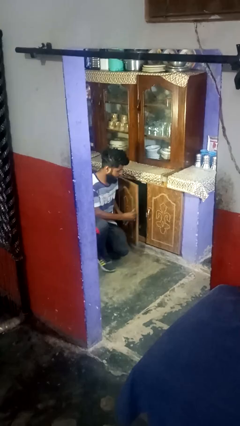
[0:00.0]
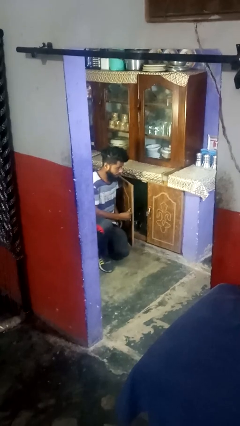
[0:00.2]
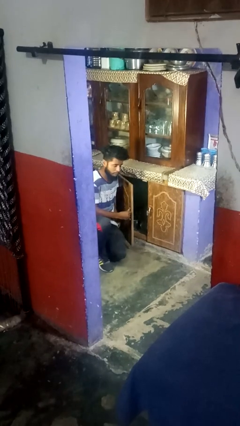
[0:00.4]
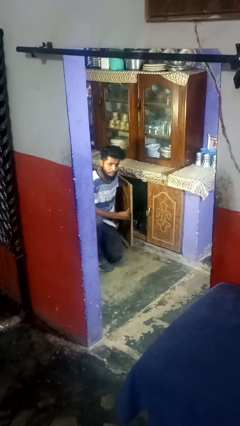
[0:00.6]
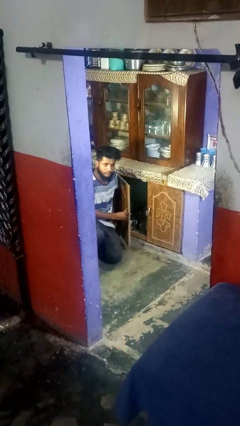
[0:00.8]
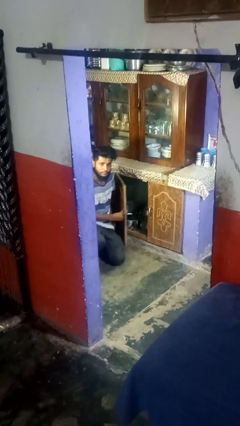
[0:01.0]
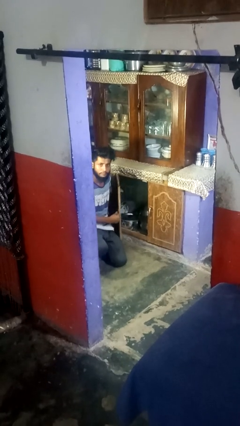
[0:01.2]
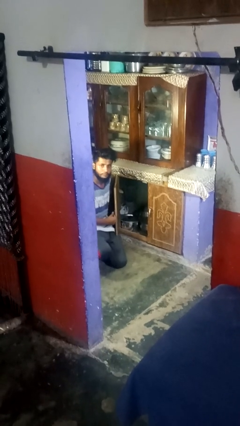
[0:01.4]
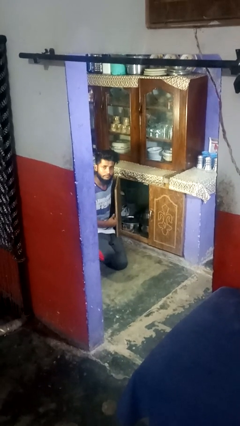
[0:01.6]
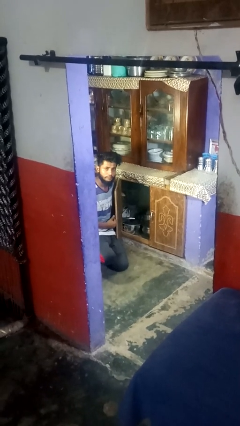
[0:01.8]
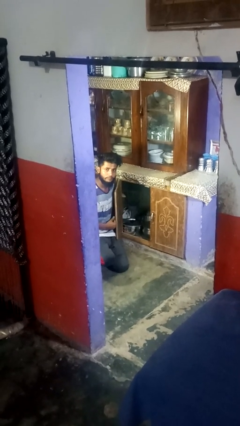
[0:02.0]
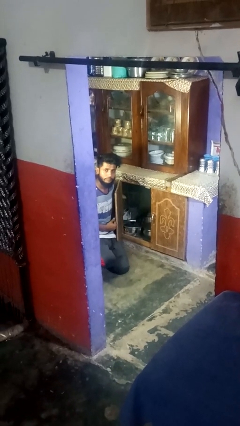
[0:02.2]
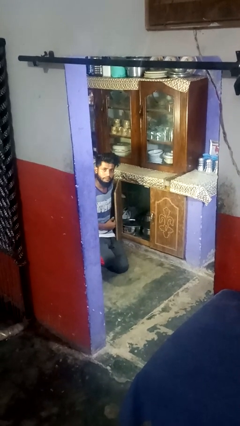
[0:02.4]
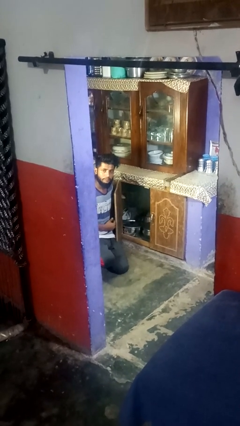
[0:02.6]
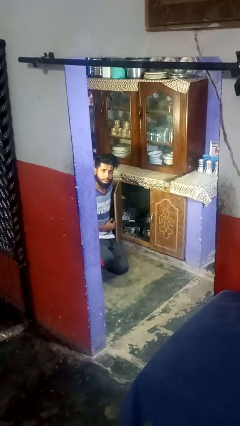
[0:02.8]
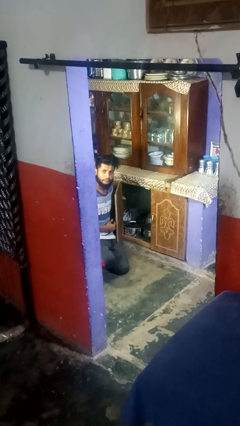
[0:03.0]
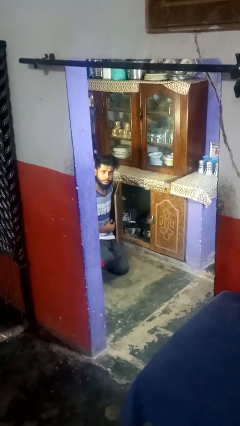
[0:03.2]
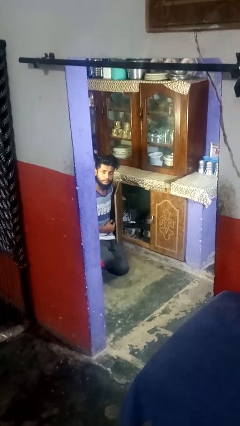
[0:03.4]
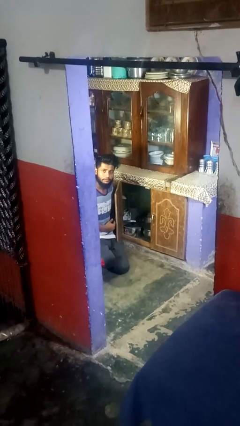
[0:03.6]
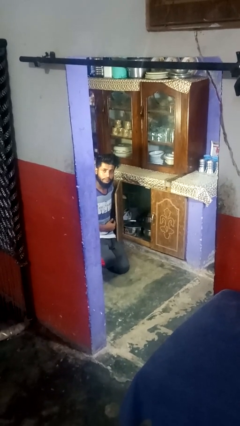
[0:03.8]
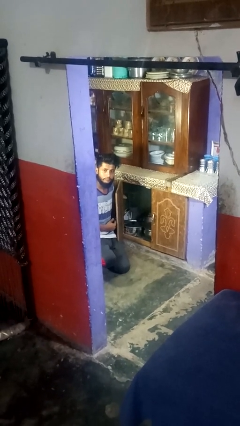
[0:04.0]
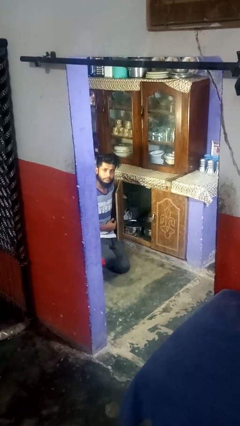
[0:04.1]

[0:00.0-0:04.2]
person opens cabinet

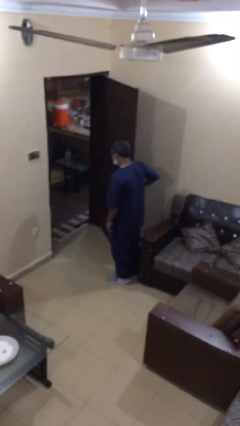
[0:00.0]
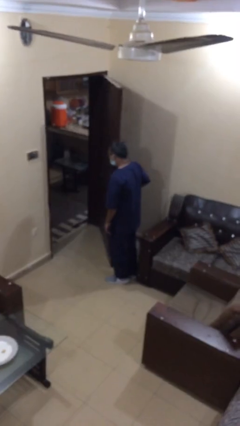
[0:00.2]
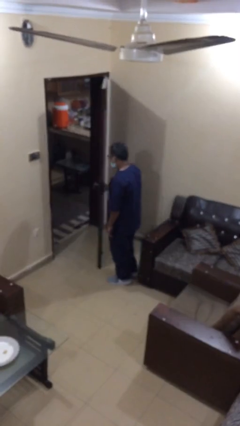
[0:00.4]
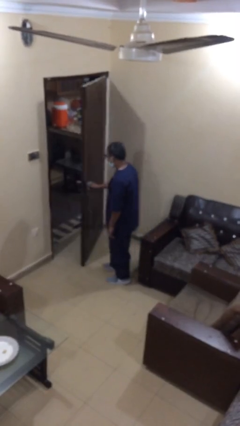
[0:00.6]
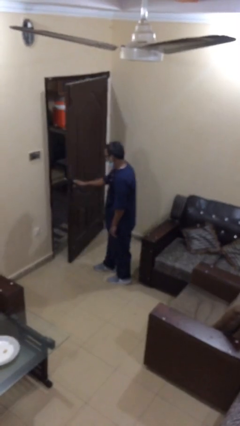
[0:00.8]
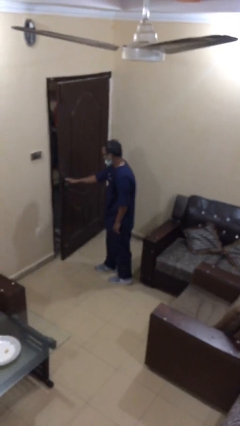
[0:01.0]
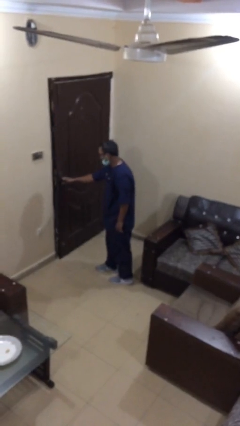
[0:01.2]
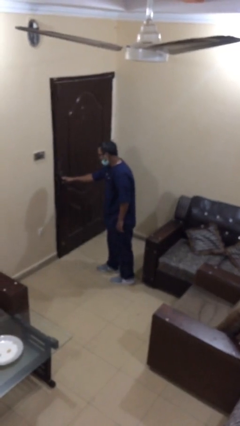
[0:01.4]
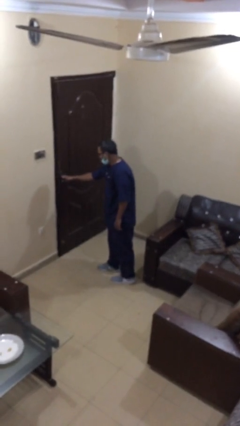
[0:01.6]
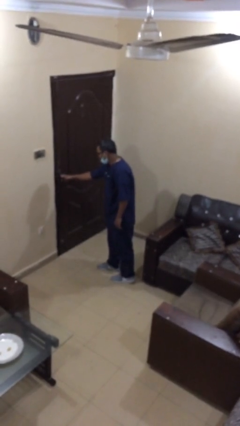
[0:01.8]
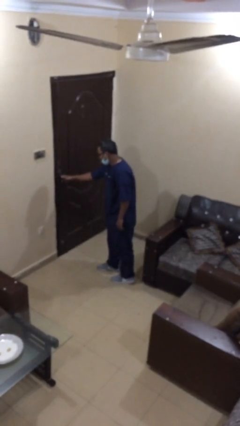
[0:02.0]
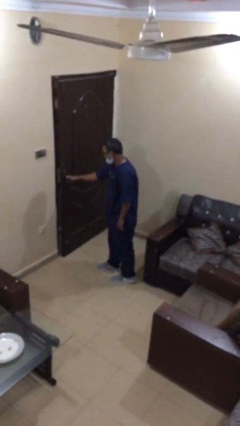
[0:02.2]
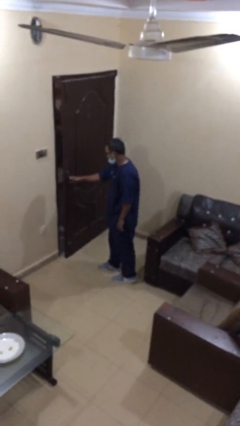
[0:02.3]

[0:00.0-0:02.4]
person closes facility door

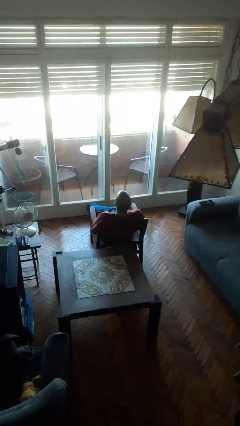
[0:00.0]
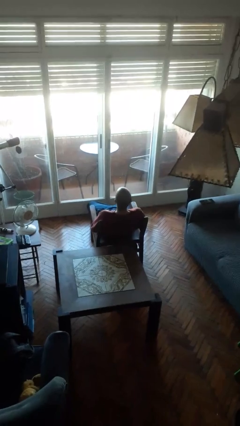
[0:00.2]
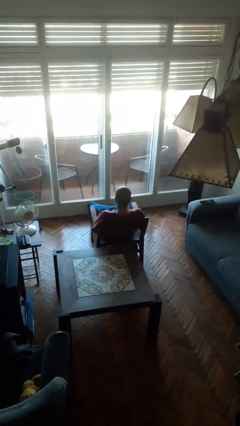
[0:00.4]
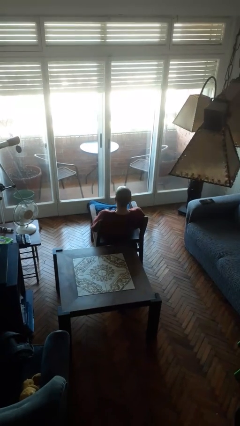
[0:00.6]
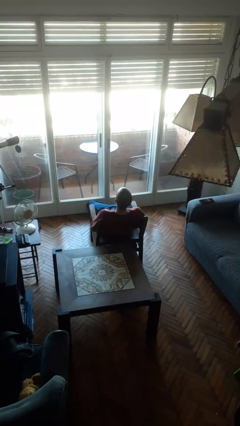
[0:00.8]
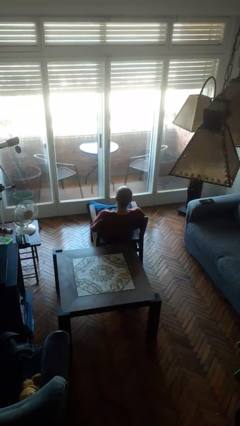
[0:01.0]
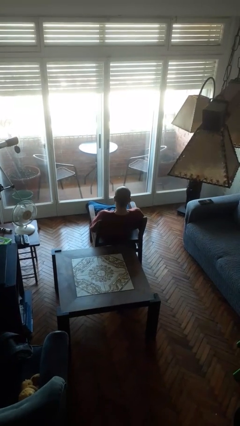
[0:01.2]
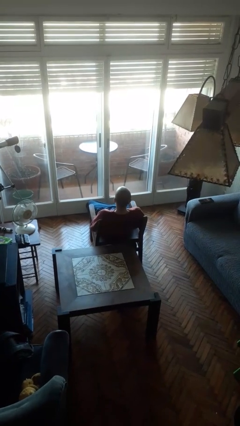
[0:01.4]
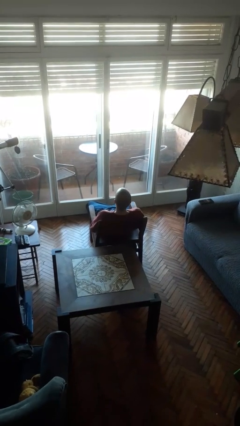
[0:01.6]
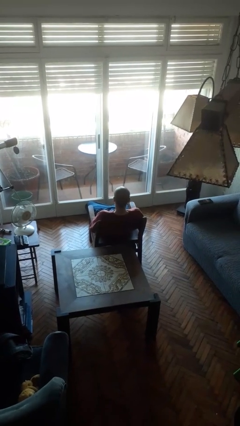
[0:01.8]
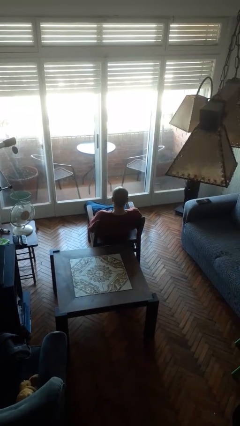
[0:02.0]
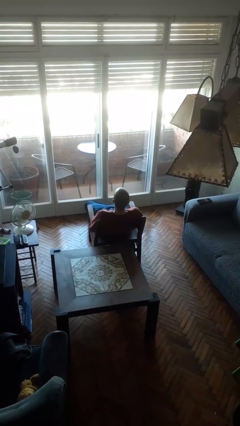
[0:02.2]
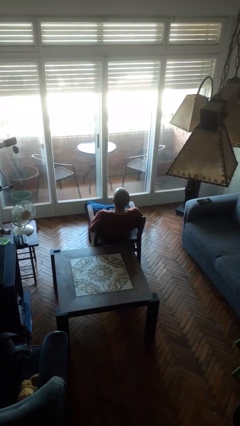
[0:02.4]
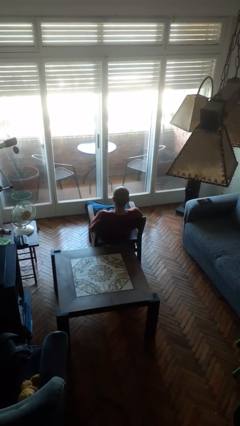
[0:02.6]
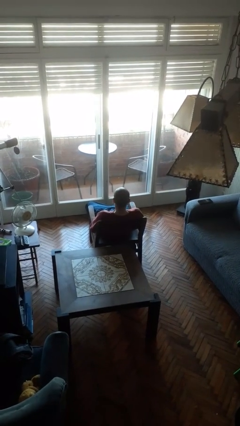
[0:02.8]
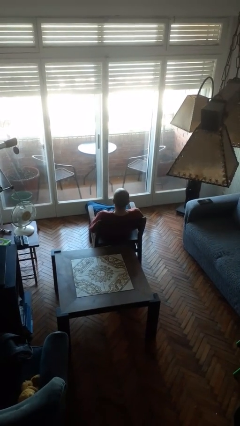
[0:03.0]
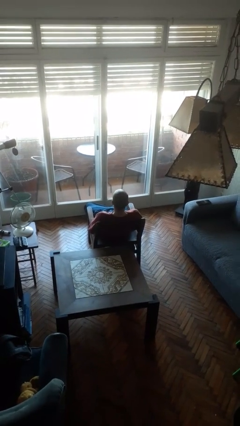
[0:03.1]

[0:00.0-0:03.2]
person nods head

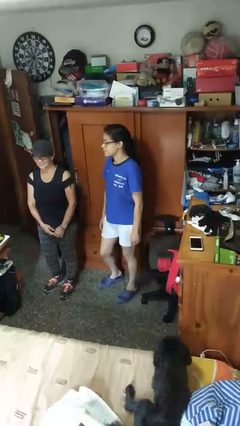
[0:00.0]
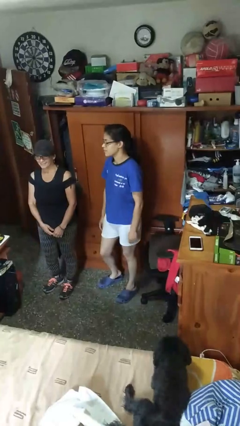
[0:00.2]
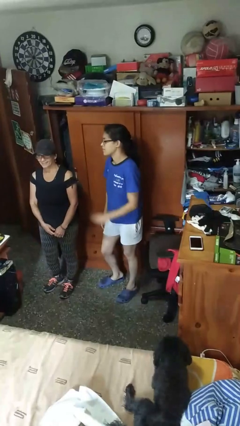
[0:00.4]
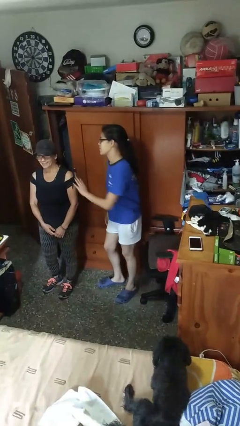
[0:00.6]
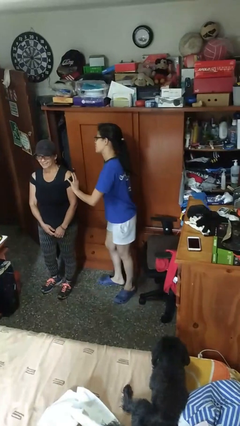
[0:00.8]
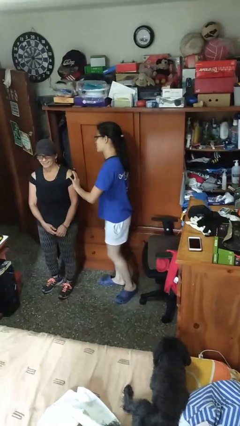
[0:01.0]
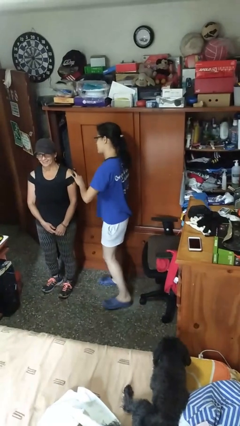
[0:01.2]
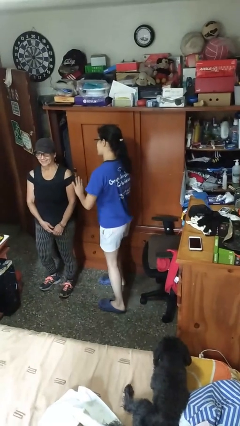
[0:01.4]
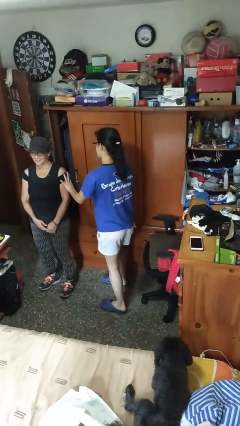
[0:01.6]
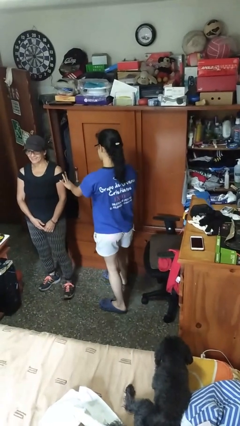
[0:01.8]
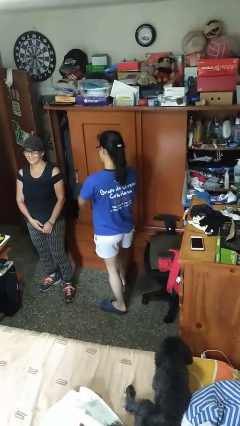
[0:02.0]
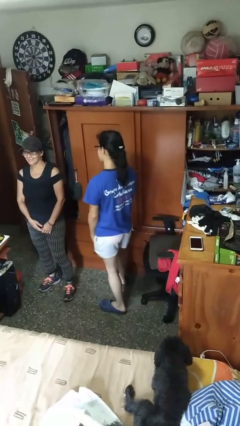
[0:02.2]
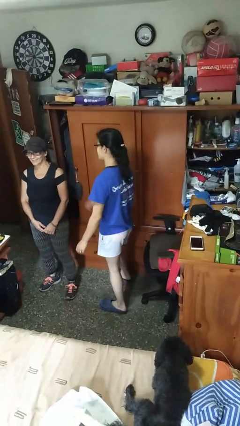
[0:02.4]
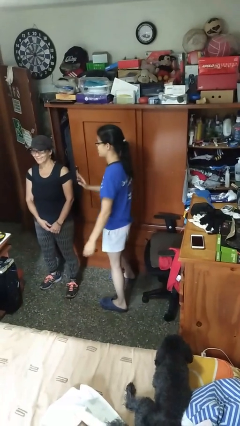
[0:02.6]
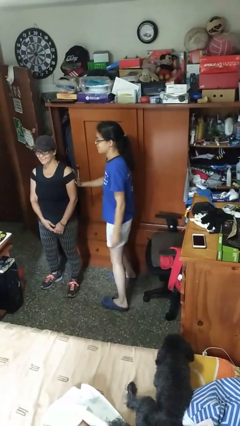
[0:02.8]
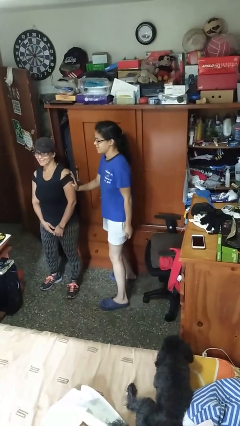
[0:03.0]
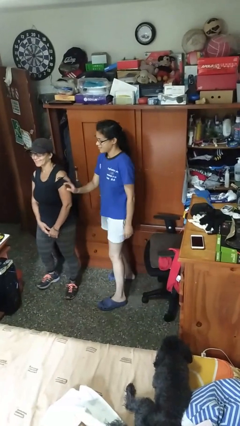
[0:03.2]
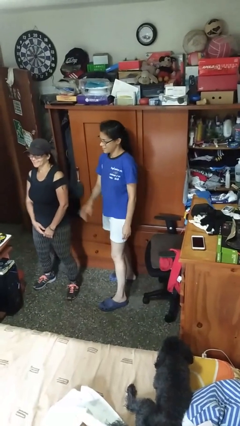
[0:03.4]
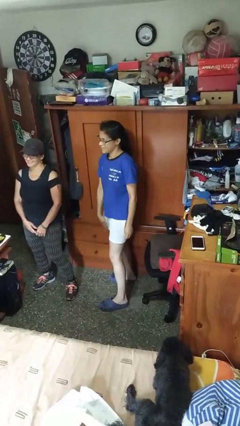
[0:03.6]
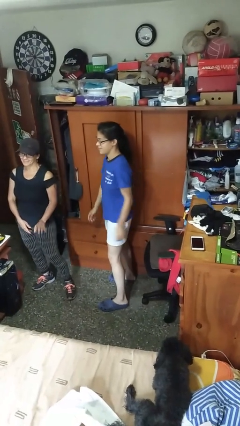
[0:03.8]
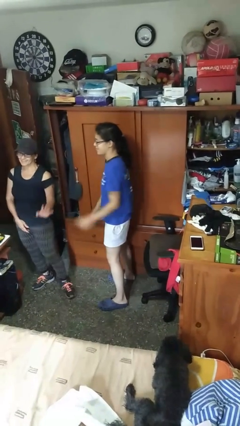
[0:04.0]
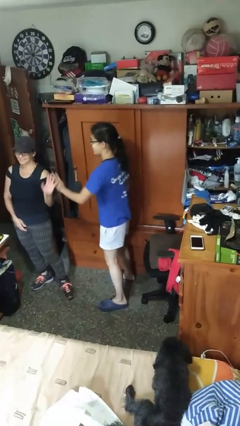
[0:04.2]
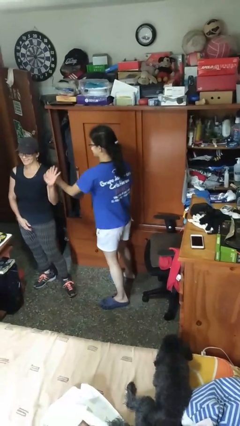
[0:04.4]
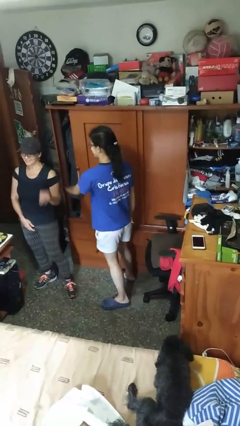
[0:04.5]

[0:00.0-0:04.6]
person shoves person

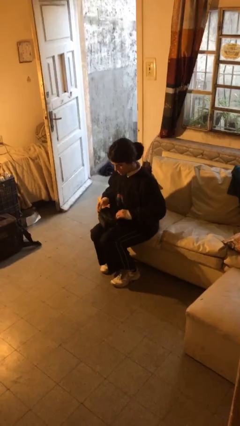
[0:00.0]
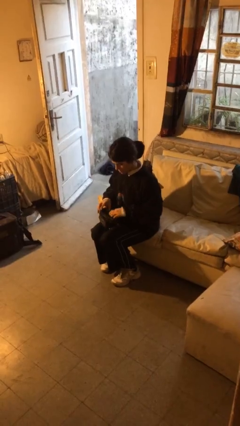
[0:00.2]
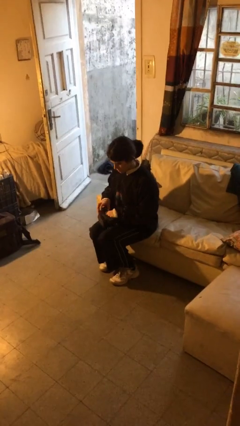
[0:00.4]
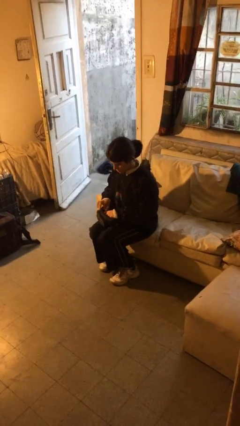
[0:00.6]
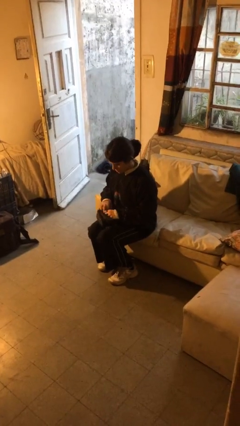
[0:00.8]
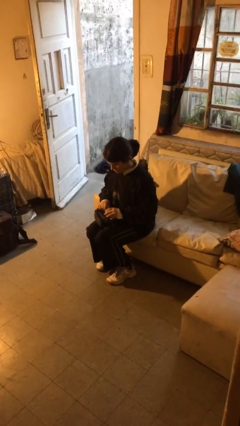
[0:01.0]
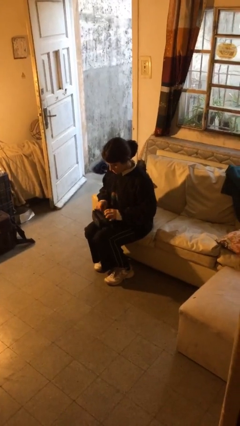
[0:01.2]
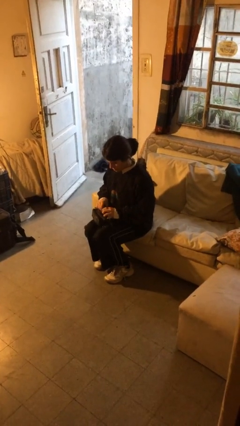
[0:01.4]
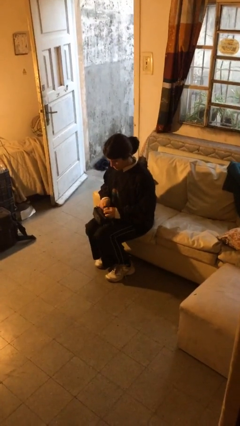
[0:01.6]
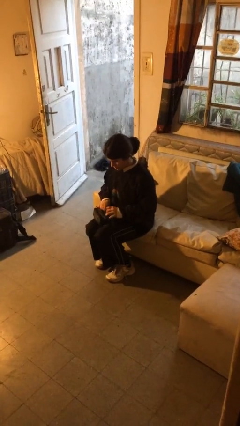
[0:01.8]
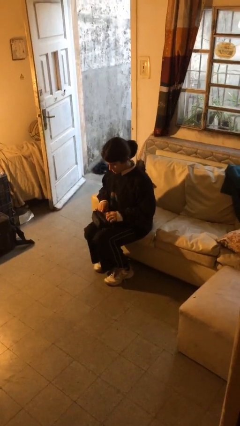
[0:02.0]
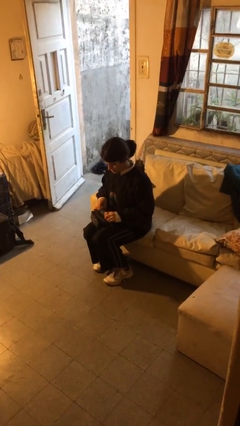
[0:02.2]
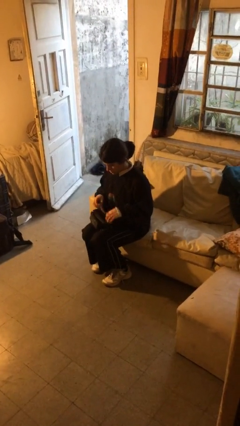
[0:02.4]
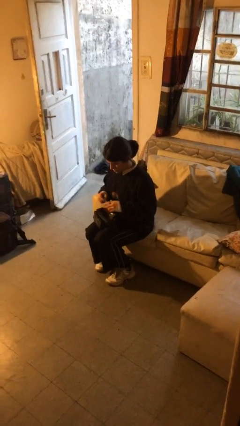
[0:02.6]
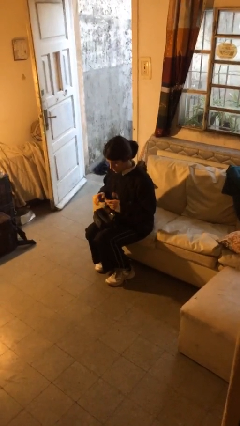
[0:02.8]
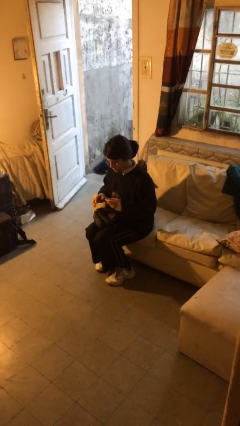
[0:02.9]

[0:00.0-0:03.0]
person searches in purse
